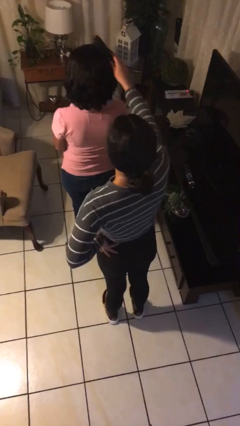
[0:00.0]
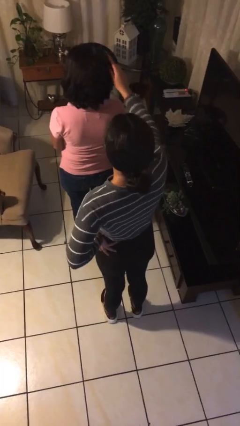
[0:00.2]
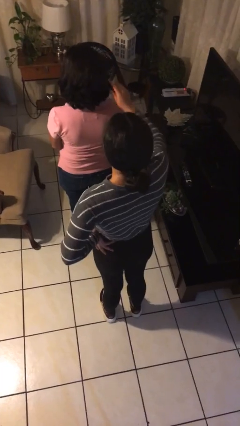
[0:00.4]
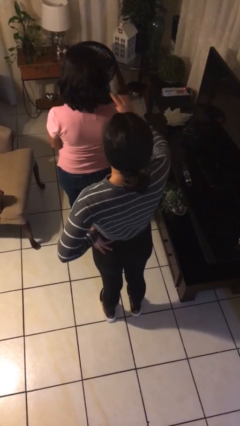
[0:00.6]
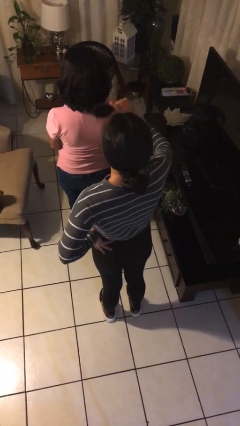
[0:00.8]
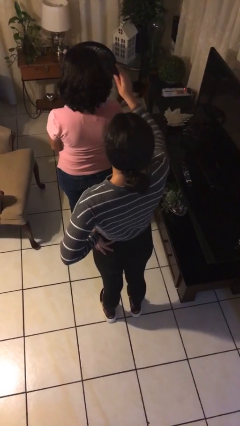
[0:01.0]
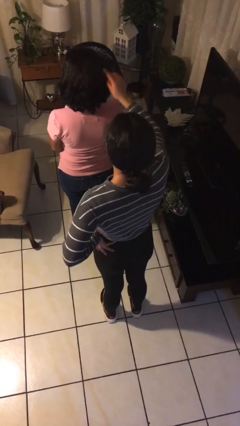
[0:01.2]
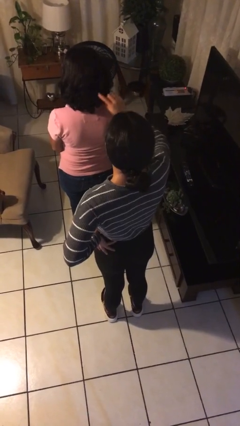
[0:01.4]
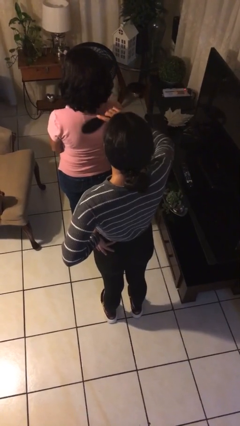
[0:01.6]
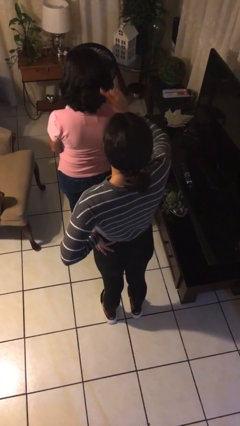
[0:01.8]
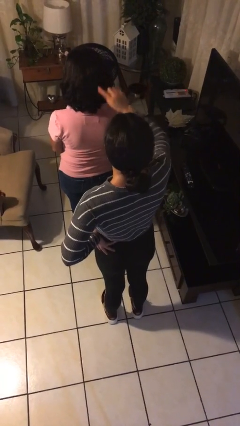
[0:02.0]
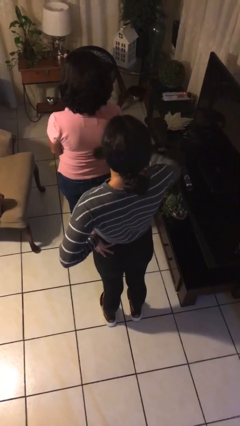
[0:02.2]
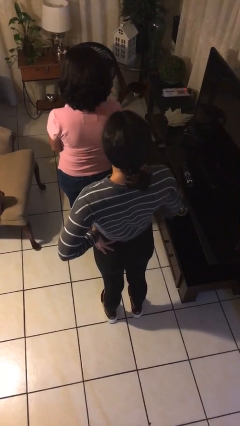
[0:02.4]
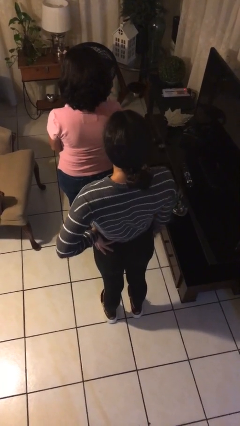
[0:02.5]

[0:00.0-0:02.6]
person brushes hair of person

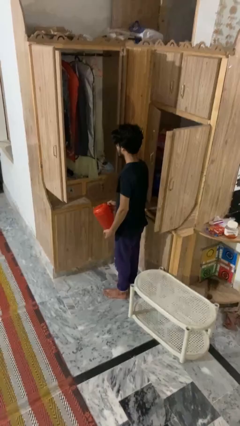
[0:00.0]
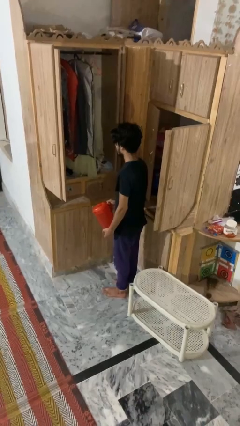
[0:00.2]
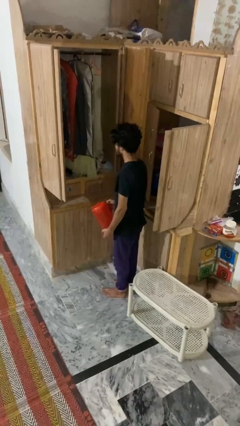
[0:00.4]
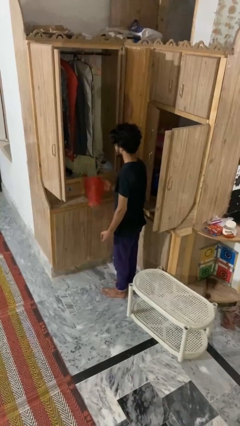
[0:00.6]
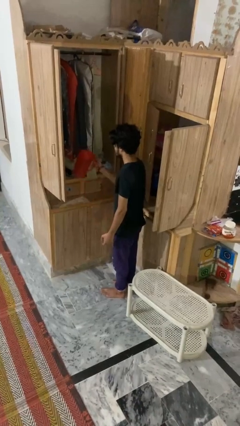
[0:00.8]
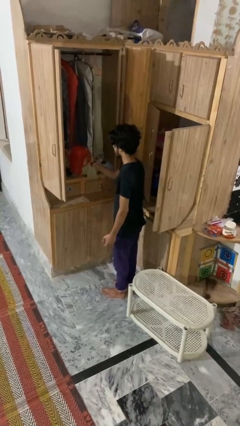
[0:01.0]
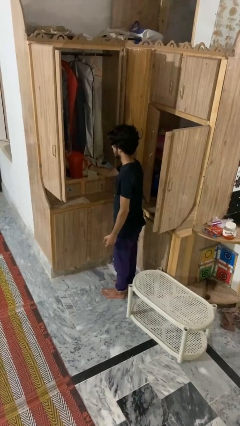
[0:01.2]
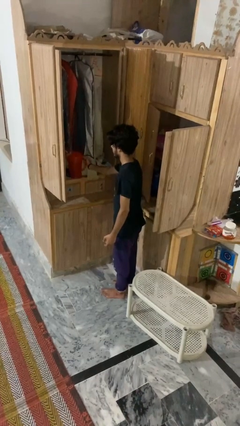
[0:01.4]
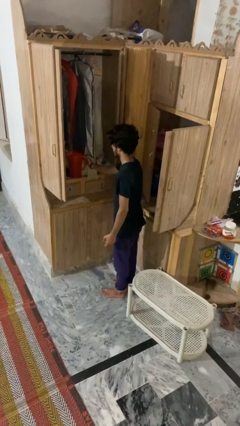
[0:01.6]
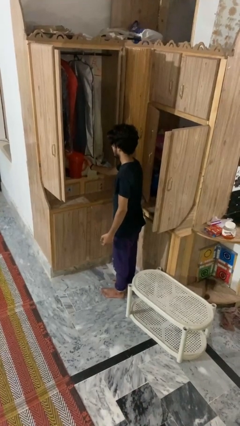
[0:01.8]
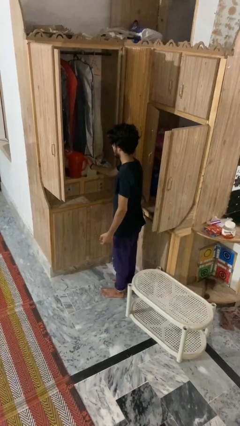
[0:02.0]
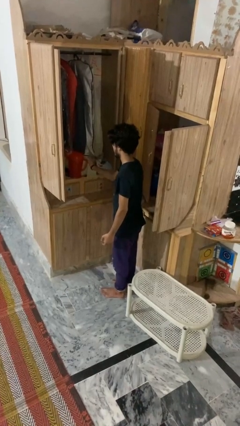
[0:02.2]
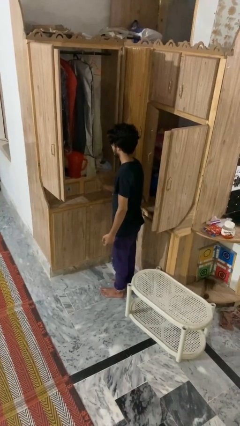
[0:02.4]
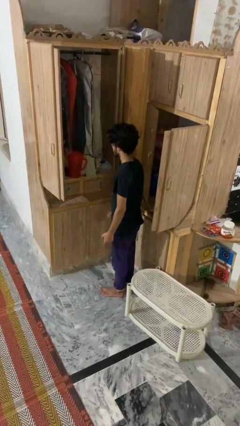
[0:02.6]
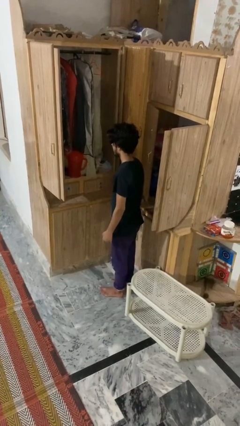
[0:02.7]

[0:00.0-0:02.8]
person puts down object into cabinet

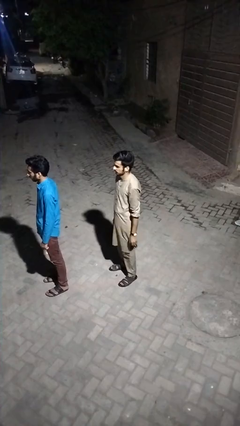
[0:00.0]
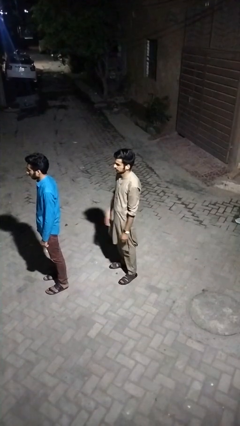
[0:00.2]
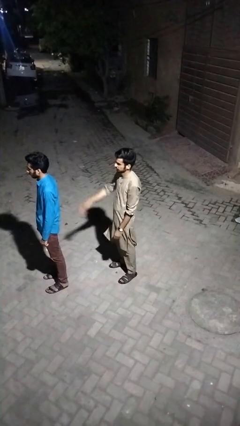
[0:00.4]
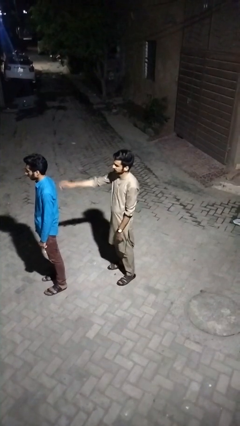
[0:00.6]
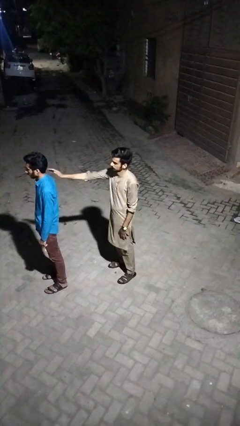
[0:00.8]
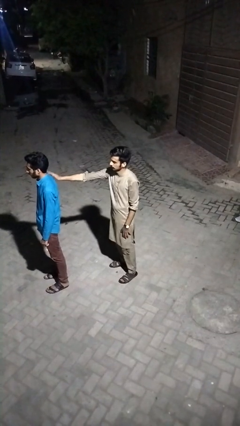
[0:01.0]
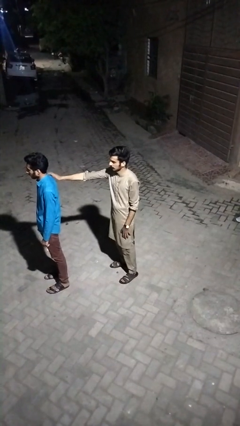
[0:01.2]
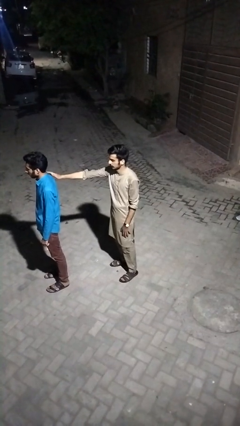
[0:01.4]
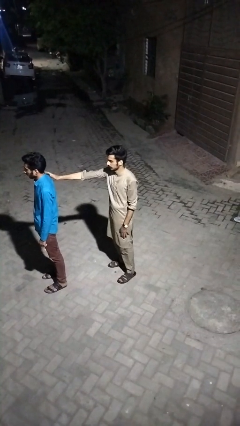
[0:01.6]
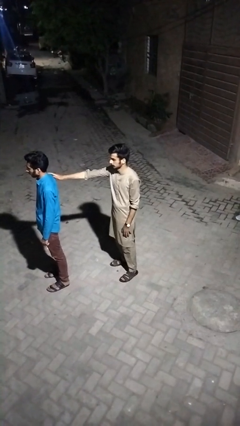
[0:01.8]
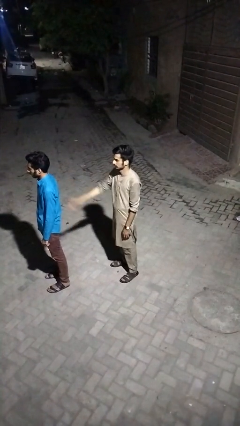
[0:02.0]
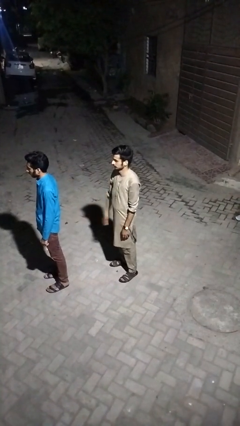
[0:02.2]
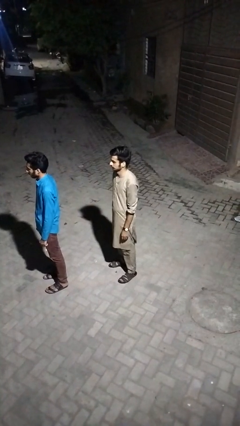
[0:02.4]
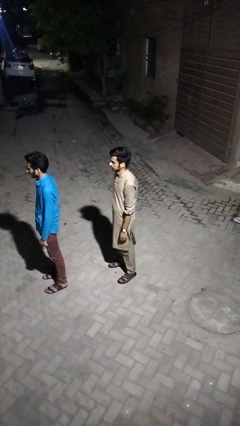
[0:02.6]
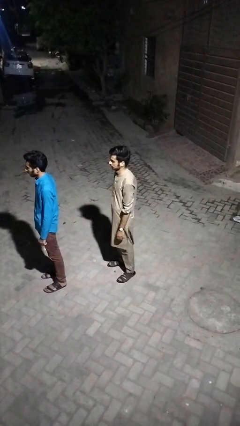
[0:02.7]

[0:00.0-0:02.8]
person touches back of person

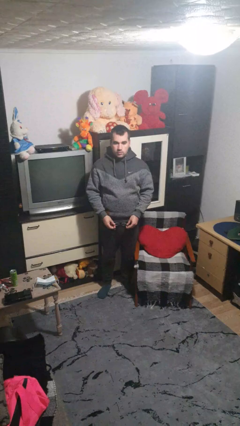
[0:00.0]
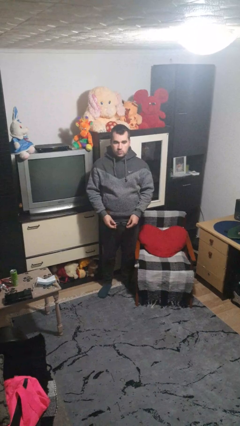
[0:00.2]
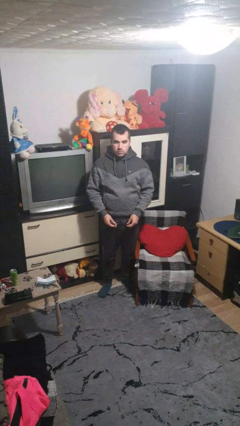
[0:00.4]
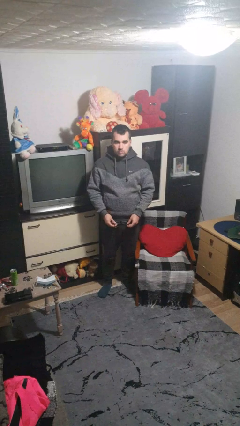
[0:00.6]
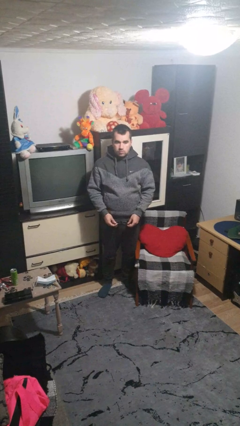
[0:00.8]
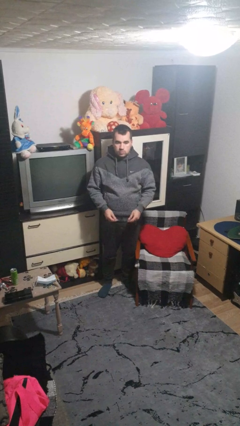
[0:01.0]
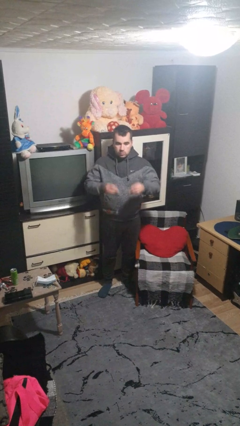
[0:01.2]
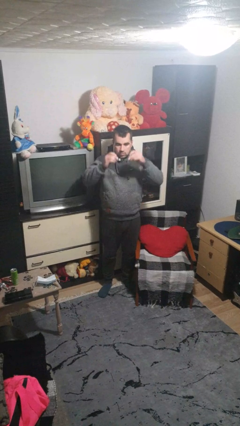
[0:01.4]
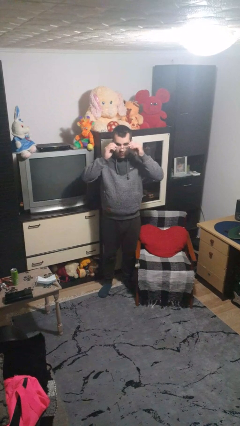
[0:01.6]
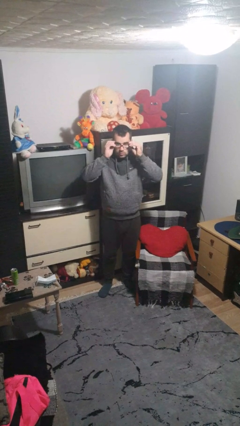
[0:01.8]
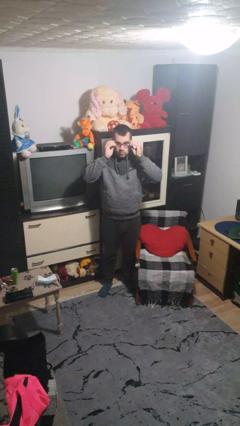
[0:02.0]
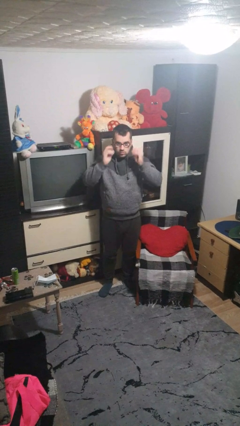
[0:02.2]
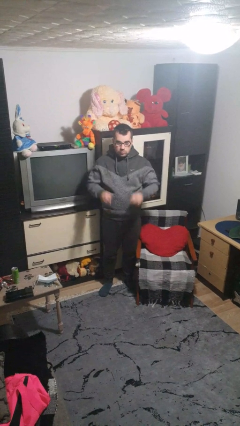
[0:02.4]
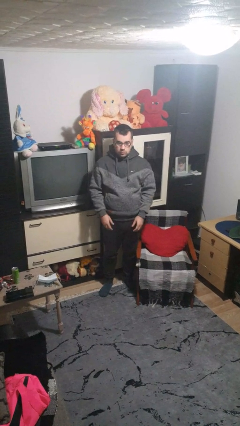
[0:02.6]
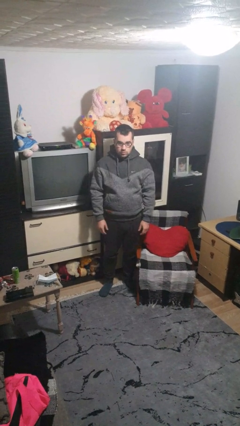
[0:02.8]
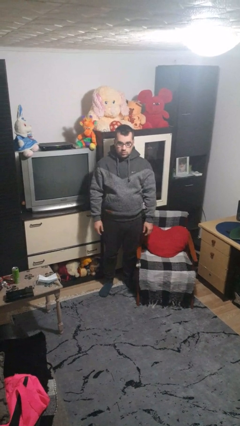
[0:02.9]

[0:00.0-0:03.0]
person puts on glasses

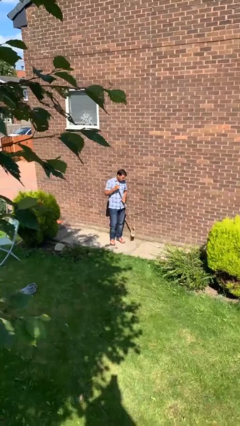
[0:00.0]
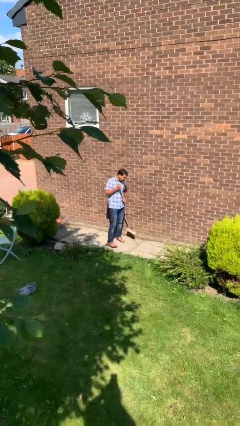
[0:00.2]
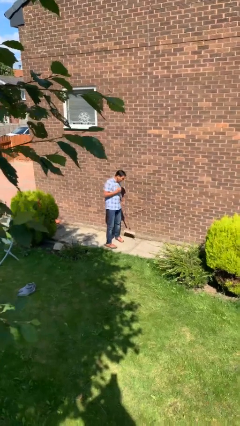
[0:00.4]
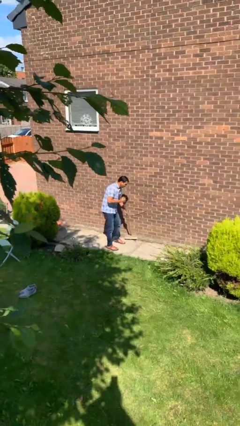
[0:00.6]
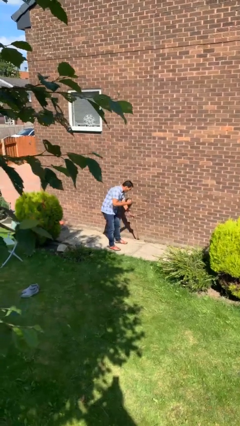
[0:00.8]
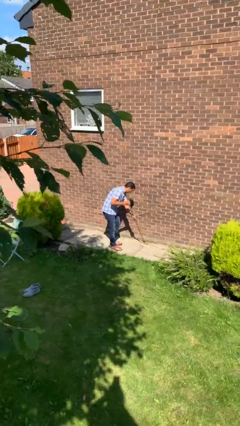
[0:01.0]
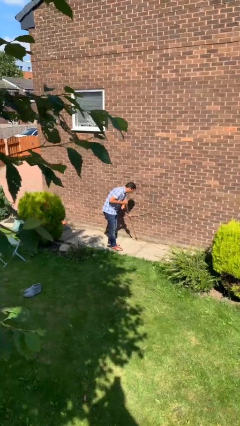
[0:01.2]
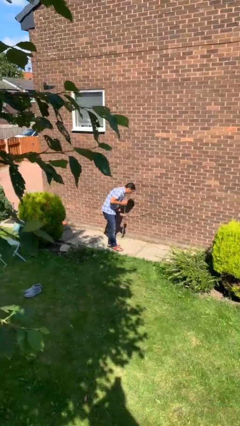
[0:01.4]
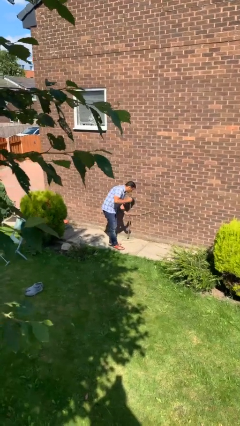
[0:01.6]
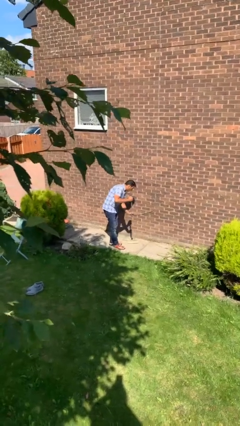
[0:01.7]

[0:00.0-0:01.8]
person sweeps floor

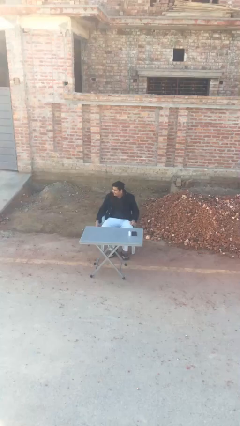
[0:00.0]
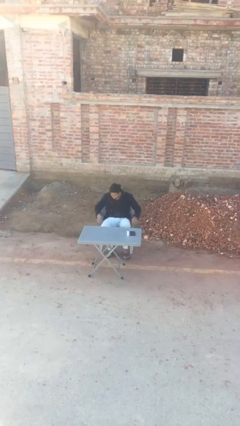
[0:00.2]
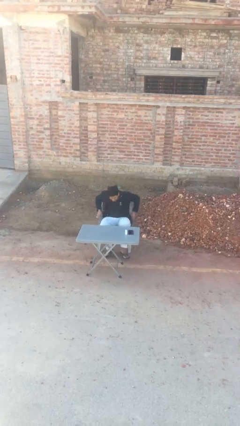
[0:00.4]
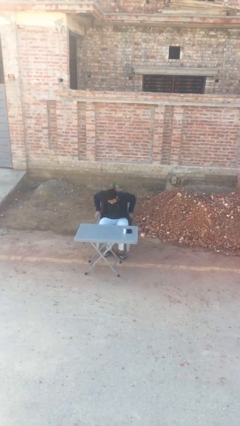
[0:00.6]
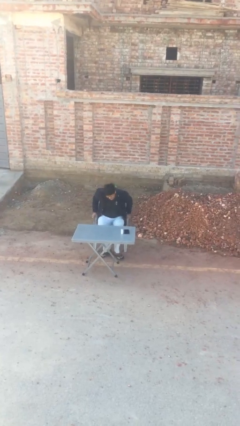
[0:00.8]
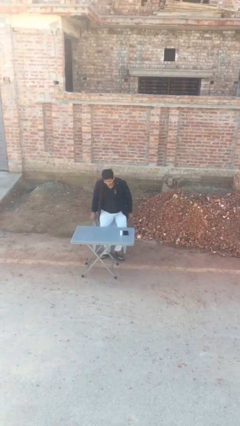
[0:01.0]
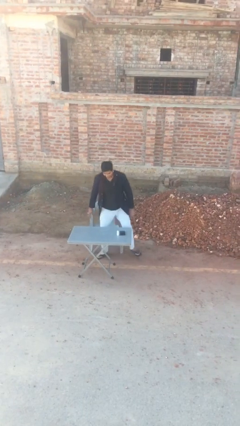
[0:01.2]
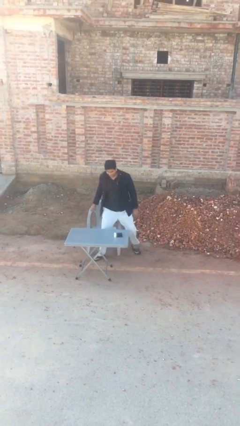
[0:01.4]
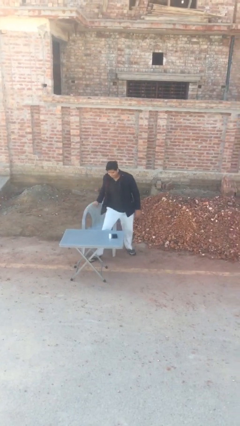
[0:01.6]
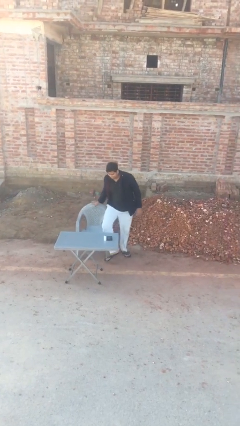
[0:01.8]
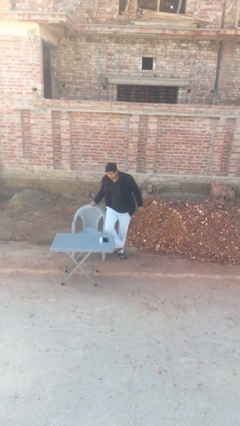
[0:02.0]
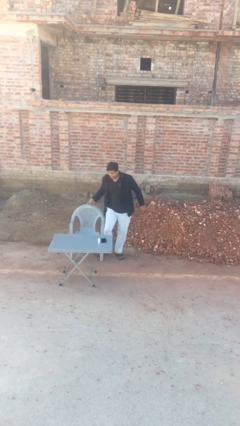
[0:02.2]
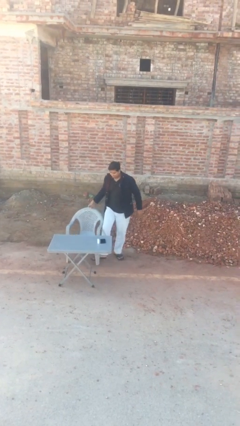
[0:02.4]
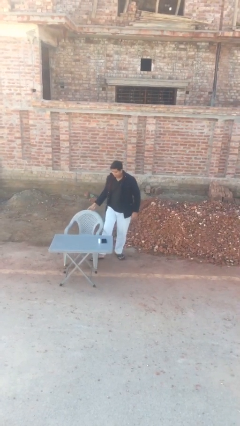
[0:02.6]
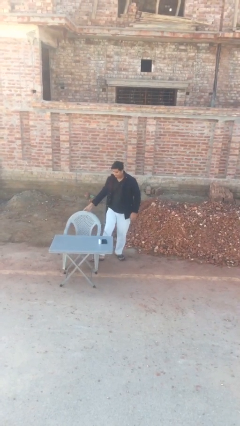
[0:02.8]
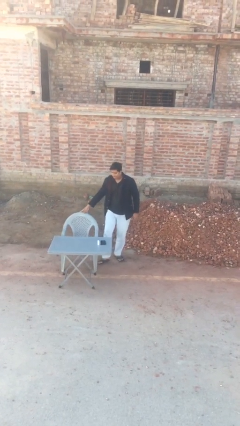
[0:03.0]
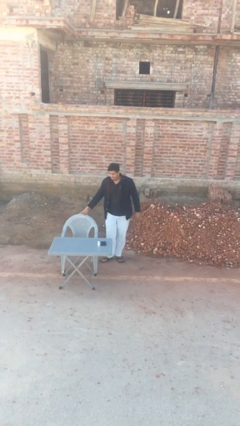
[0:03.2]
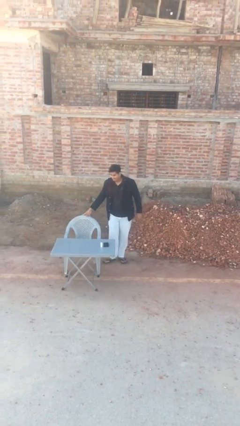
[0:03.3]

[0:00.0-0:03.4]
person stands up

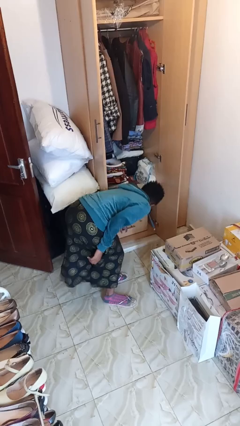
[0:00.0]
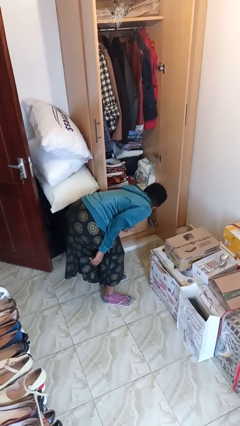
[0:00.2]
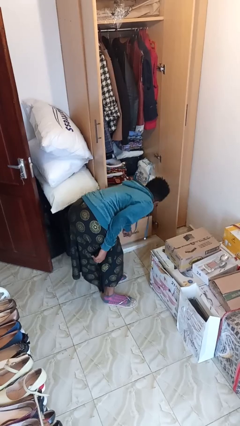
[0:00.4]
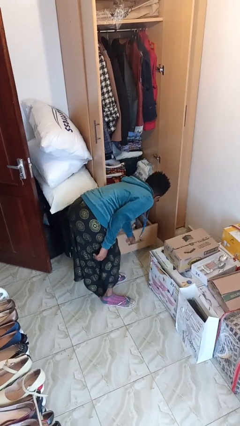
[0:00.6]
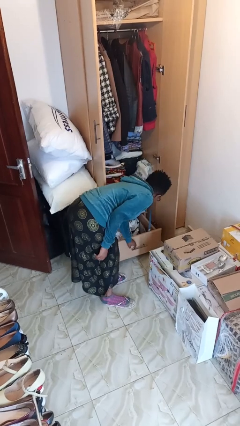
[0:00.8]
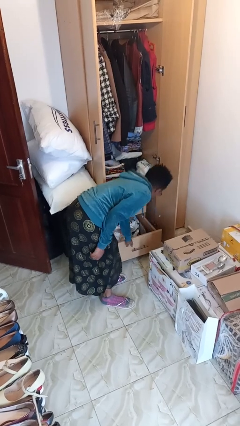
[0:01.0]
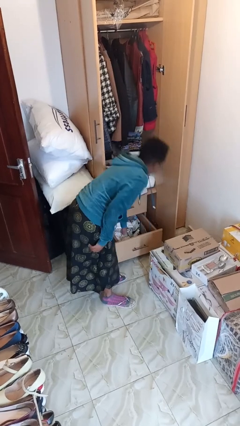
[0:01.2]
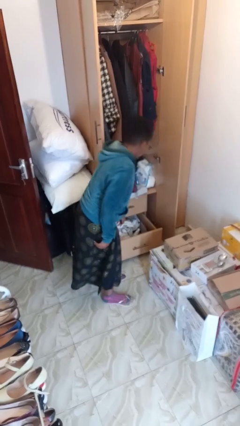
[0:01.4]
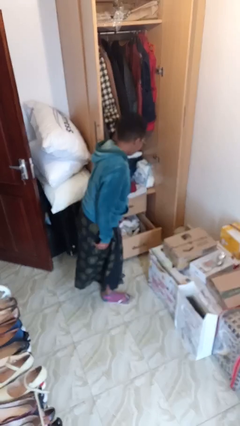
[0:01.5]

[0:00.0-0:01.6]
person opens dresser drawer
